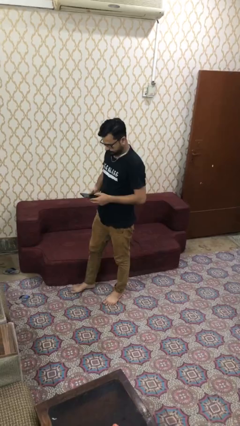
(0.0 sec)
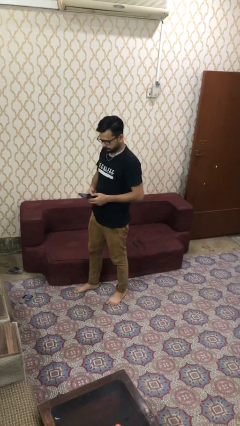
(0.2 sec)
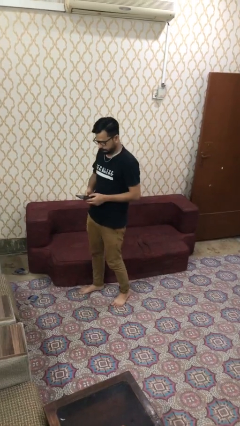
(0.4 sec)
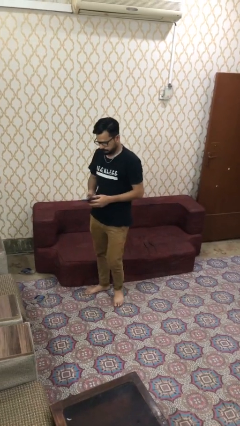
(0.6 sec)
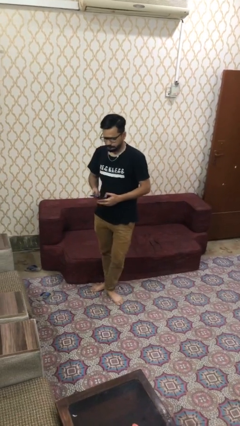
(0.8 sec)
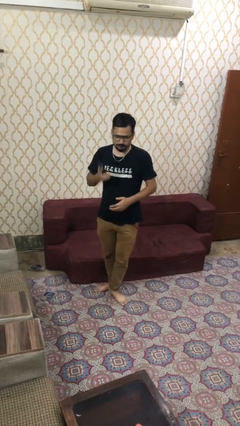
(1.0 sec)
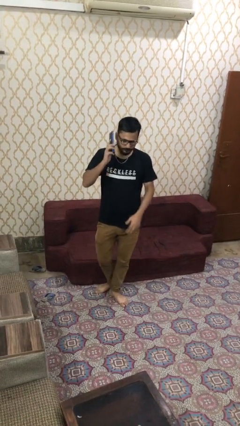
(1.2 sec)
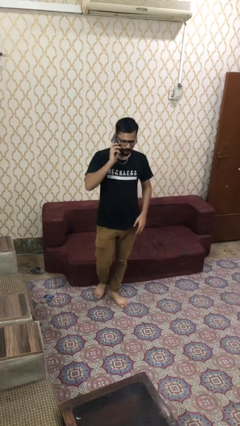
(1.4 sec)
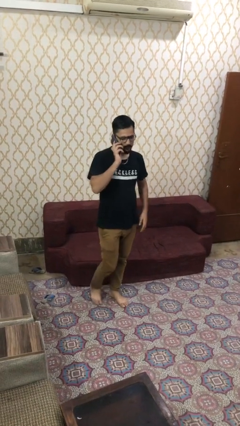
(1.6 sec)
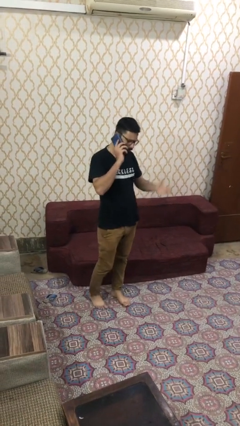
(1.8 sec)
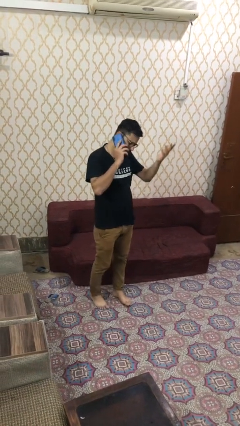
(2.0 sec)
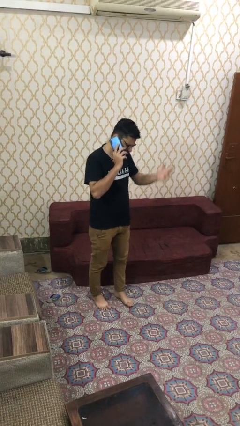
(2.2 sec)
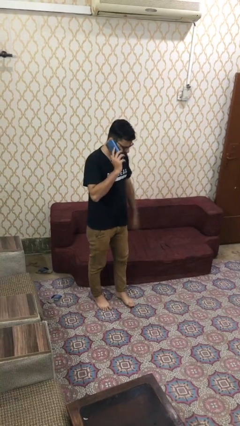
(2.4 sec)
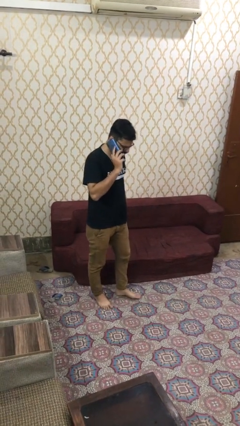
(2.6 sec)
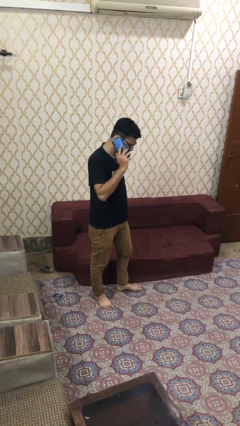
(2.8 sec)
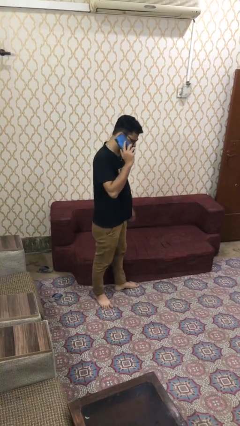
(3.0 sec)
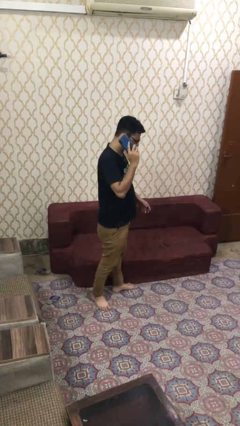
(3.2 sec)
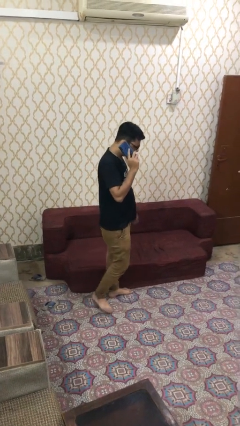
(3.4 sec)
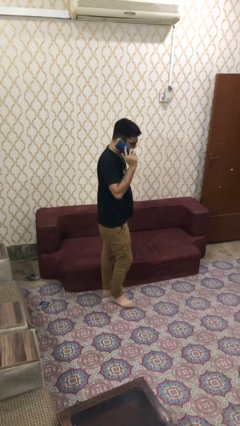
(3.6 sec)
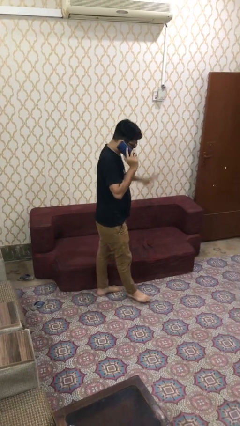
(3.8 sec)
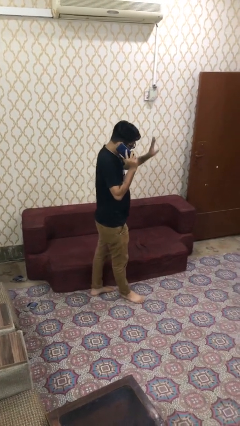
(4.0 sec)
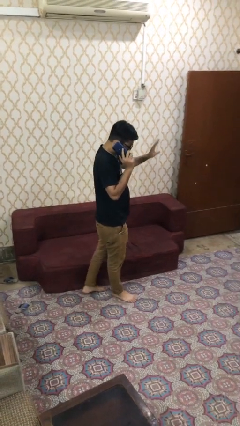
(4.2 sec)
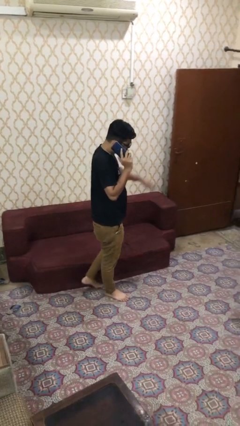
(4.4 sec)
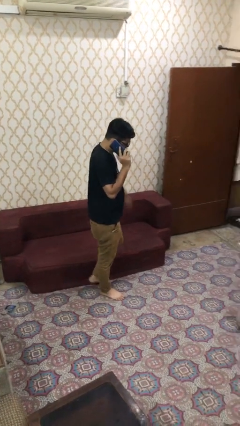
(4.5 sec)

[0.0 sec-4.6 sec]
person talks on phone

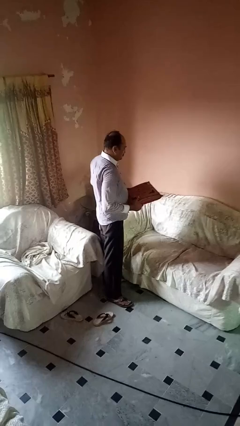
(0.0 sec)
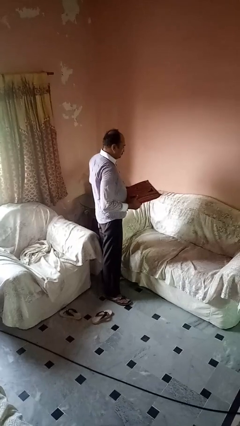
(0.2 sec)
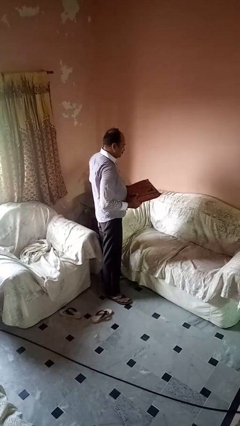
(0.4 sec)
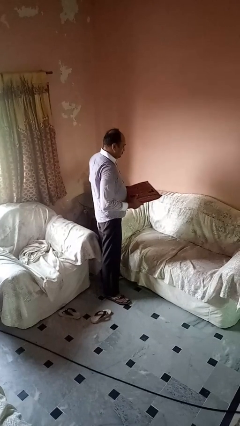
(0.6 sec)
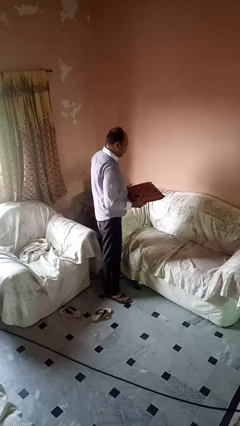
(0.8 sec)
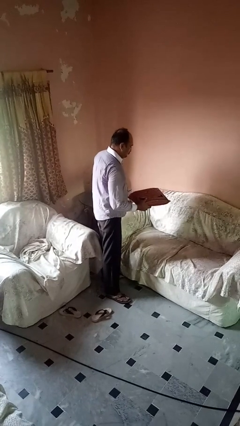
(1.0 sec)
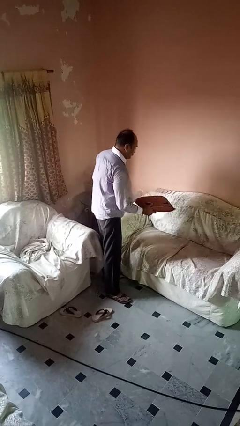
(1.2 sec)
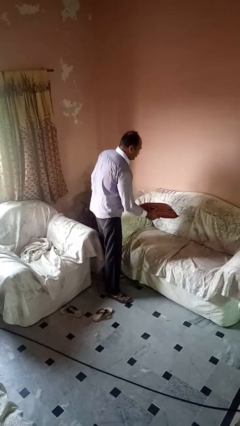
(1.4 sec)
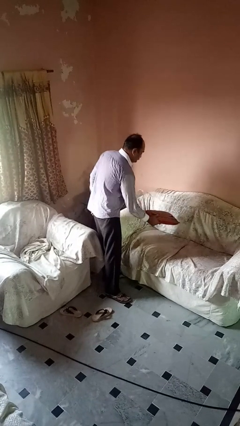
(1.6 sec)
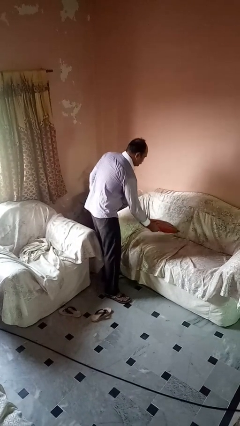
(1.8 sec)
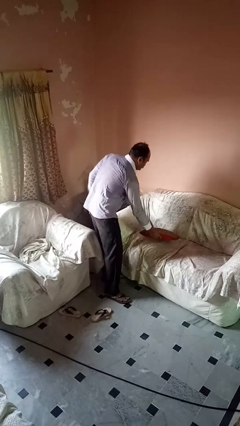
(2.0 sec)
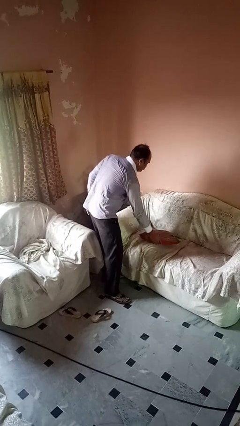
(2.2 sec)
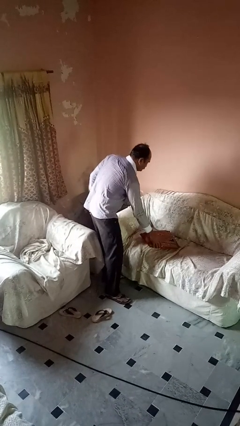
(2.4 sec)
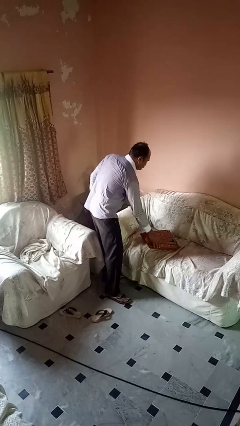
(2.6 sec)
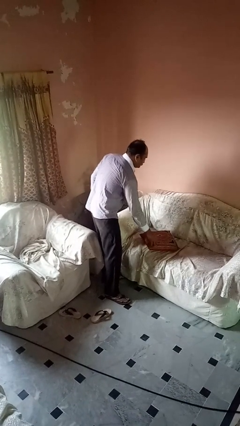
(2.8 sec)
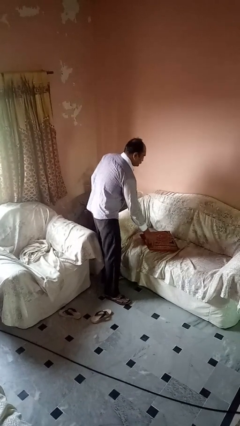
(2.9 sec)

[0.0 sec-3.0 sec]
person puts down object on couch

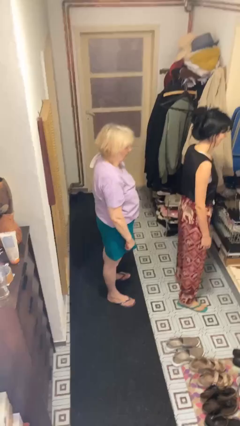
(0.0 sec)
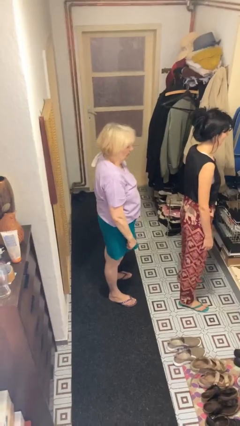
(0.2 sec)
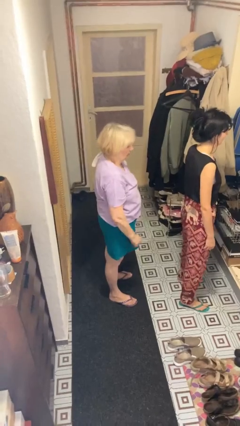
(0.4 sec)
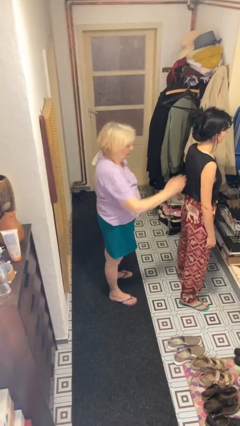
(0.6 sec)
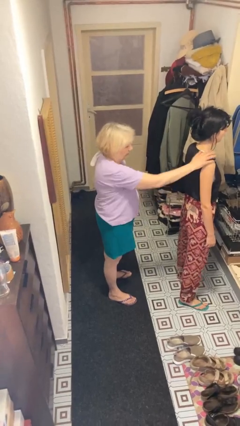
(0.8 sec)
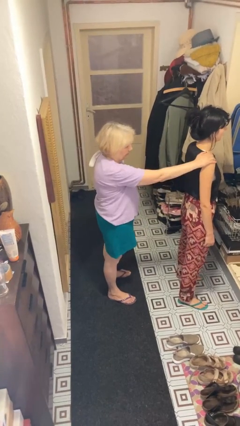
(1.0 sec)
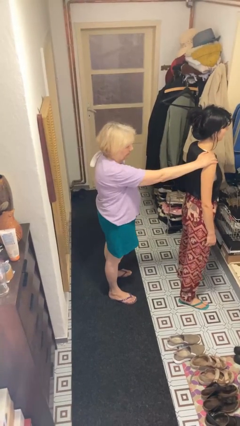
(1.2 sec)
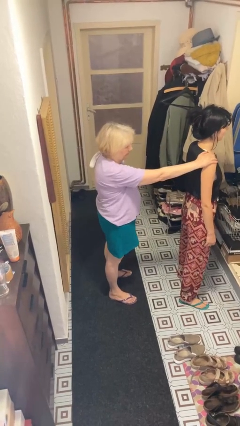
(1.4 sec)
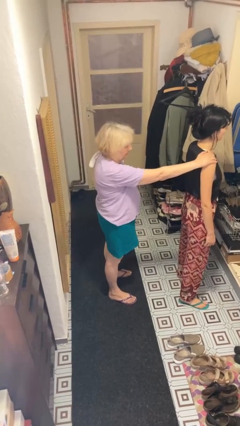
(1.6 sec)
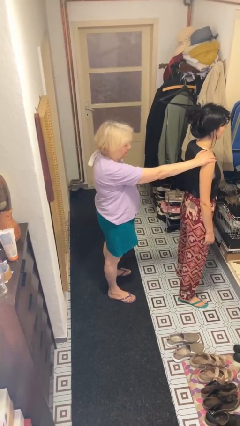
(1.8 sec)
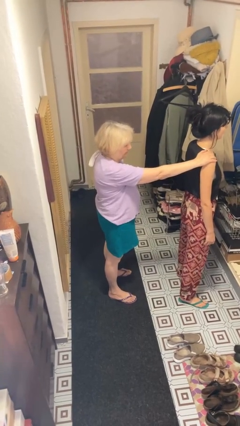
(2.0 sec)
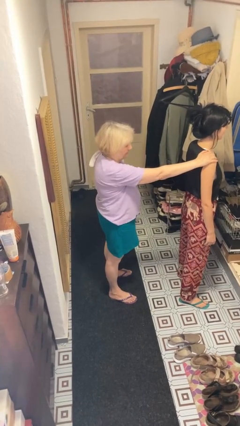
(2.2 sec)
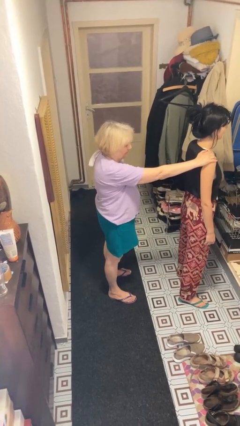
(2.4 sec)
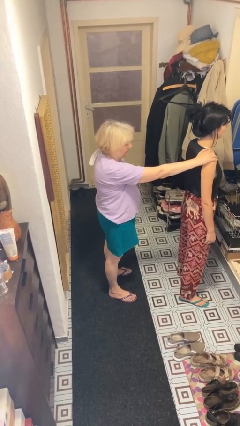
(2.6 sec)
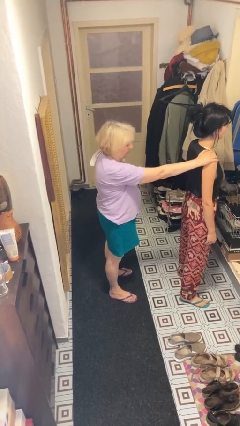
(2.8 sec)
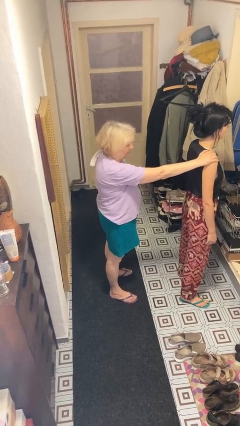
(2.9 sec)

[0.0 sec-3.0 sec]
person grabs person by shoulder

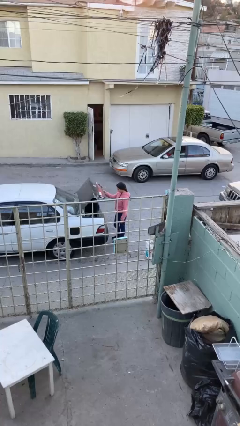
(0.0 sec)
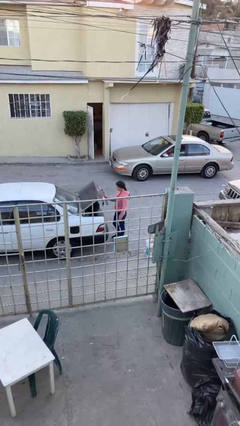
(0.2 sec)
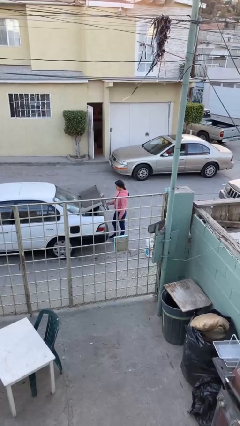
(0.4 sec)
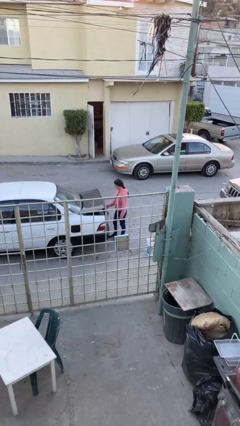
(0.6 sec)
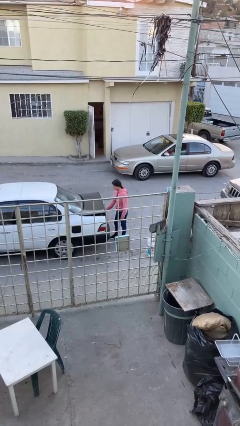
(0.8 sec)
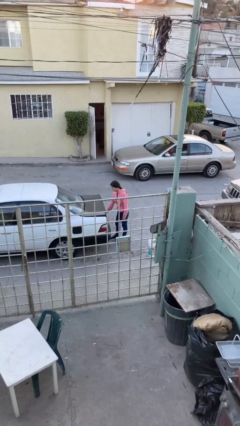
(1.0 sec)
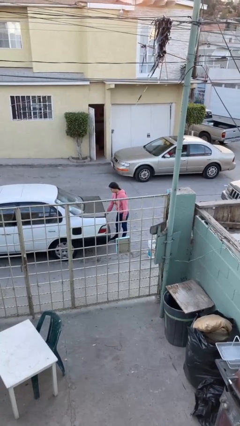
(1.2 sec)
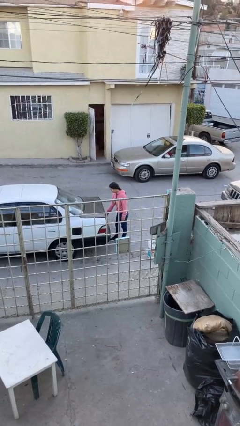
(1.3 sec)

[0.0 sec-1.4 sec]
person closes car trunk

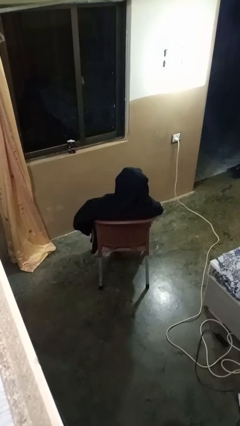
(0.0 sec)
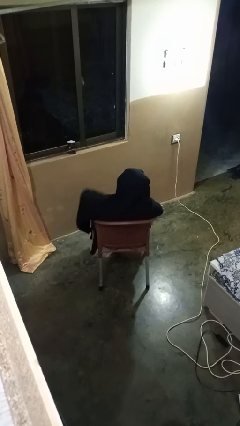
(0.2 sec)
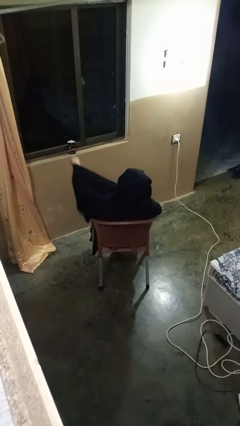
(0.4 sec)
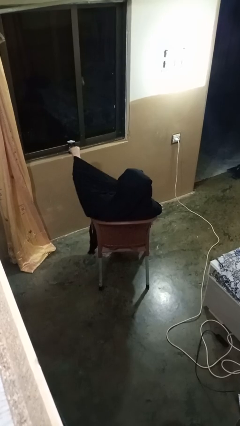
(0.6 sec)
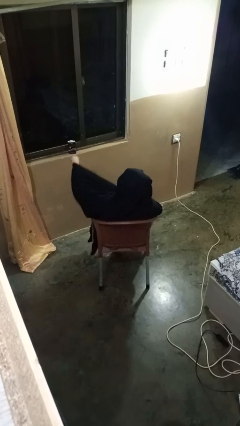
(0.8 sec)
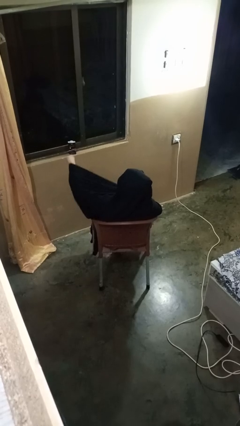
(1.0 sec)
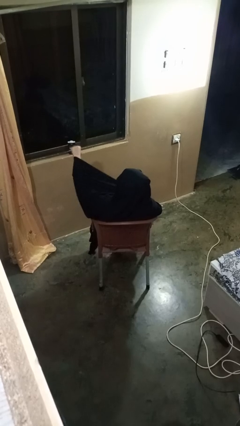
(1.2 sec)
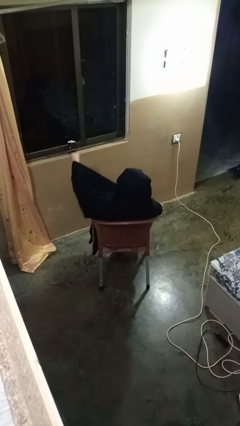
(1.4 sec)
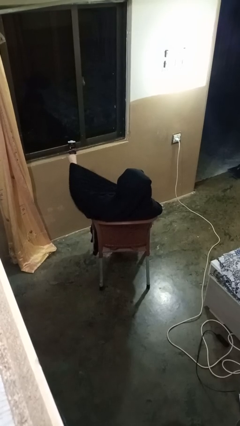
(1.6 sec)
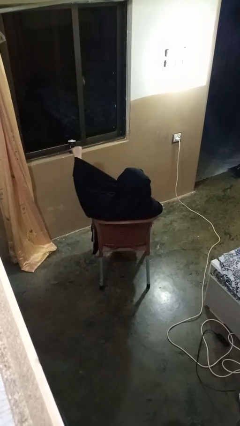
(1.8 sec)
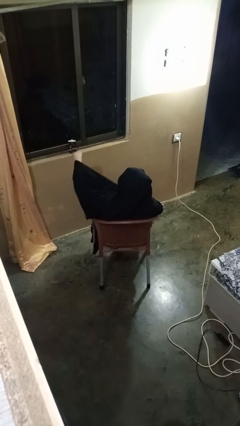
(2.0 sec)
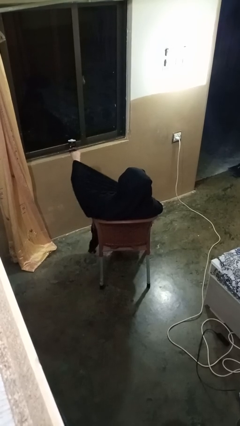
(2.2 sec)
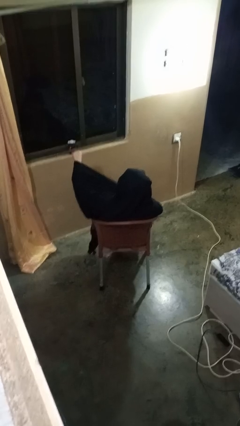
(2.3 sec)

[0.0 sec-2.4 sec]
person gestures thumbs down

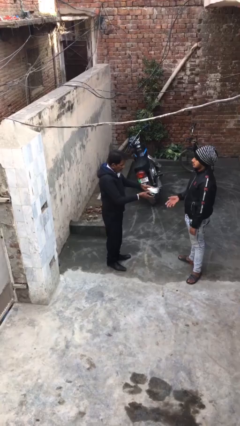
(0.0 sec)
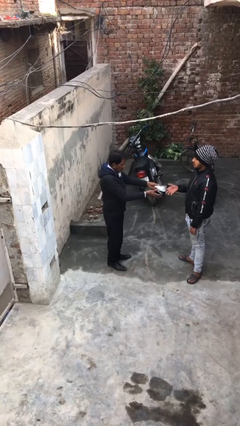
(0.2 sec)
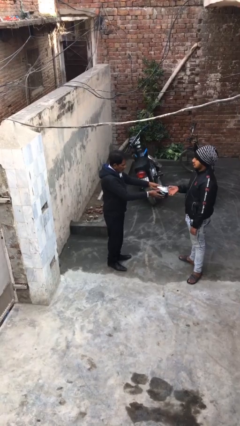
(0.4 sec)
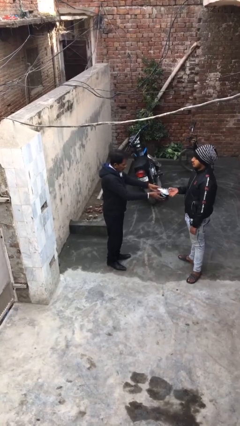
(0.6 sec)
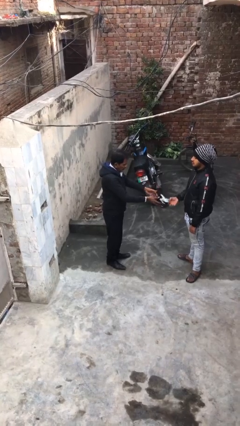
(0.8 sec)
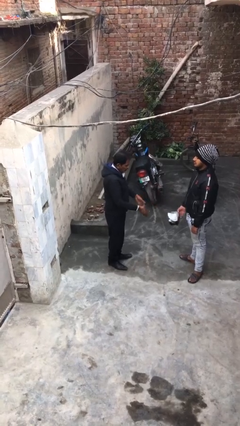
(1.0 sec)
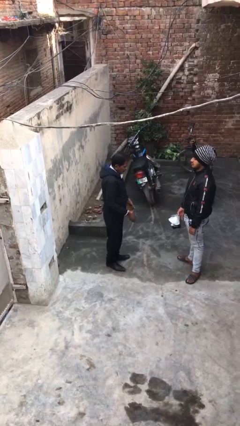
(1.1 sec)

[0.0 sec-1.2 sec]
person transfers object to person

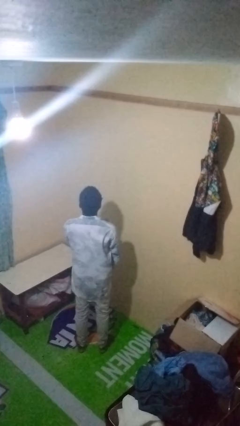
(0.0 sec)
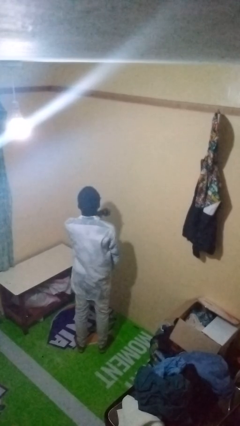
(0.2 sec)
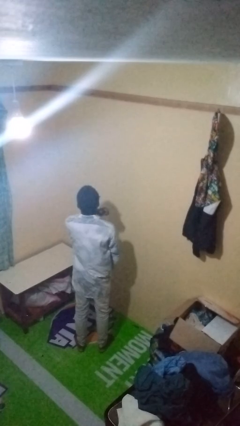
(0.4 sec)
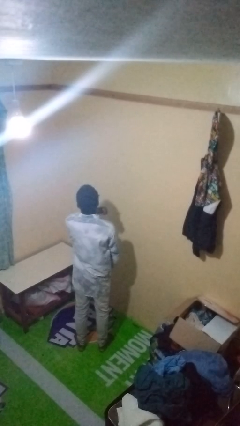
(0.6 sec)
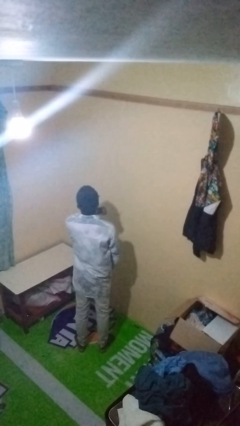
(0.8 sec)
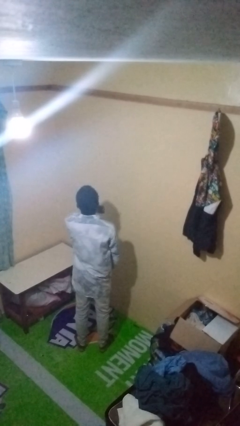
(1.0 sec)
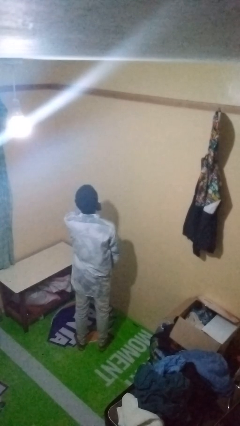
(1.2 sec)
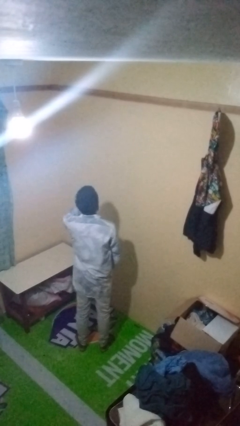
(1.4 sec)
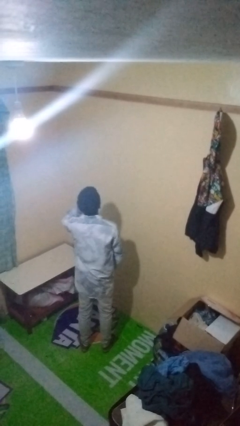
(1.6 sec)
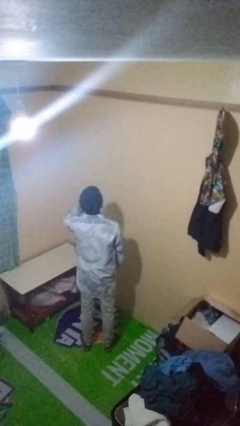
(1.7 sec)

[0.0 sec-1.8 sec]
person gestures cut
